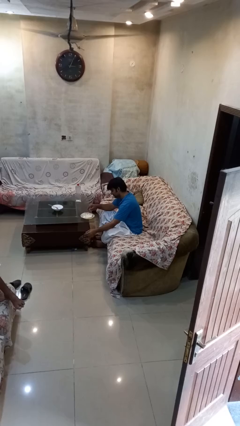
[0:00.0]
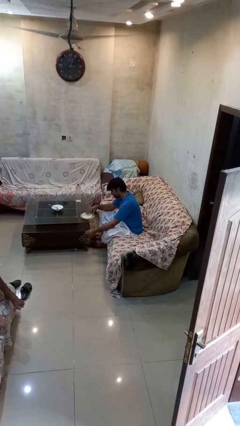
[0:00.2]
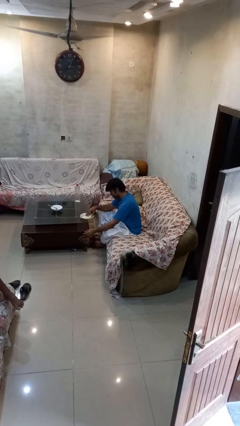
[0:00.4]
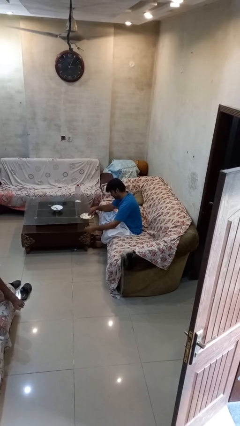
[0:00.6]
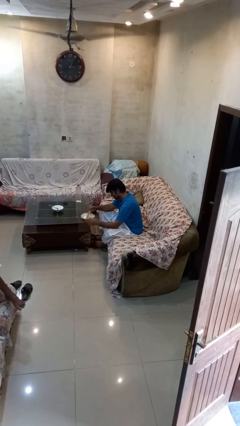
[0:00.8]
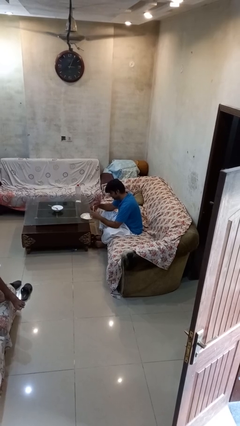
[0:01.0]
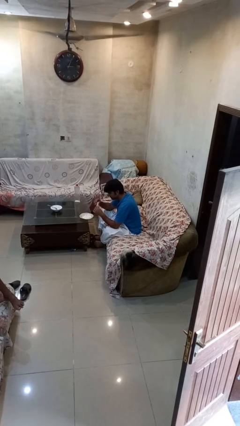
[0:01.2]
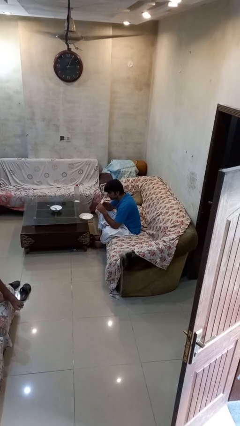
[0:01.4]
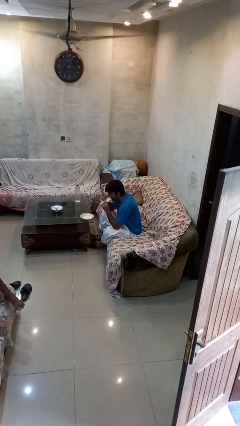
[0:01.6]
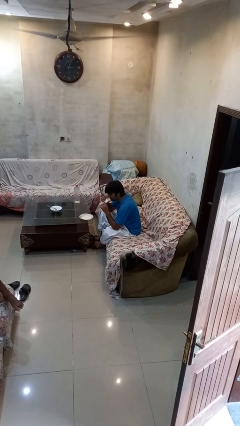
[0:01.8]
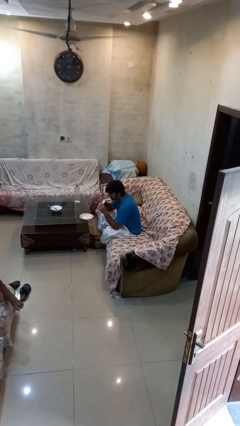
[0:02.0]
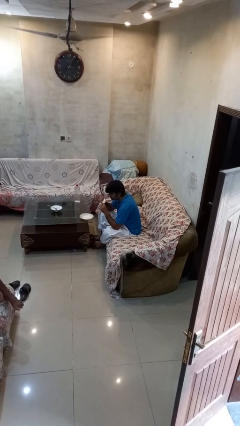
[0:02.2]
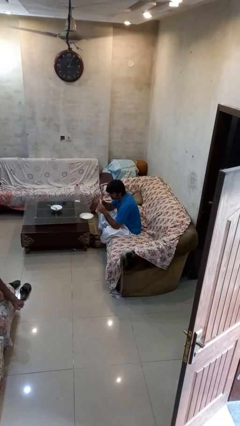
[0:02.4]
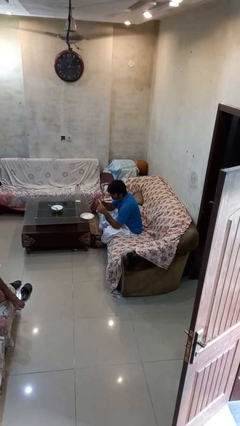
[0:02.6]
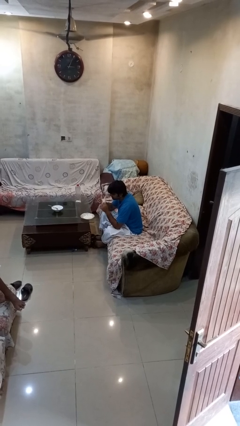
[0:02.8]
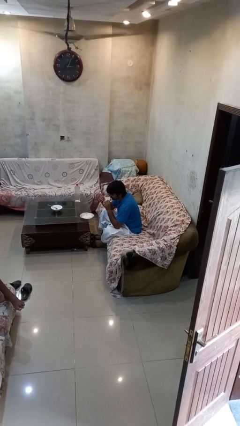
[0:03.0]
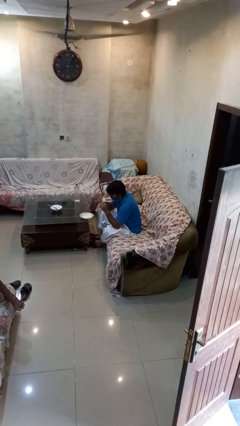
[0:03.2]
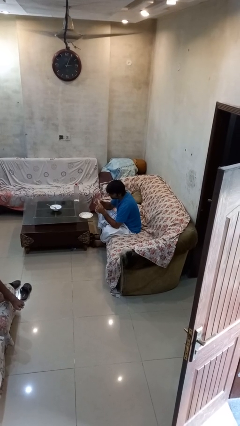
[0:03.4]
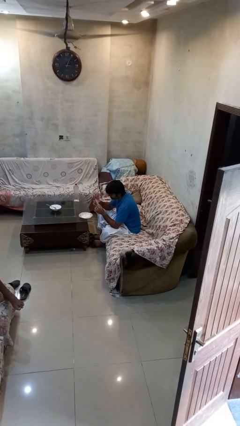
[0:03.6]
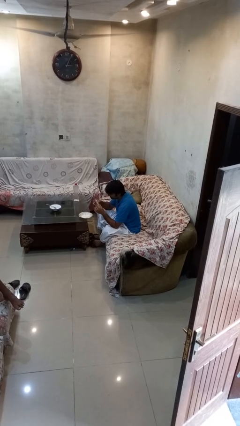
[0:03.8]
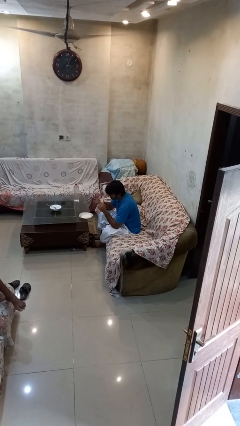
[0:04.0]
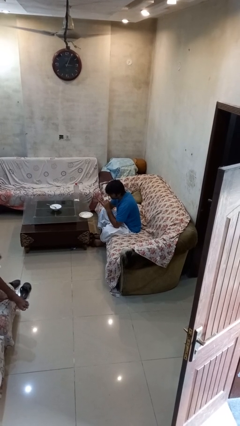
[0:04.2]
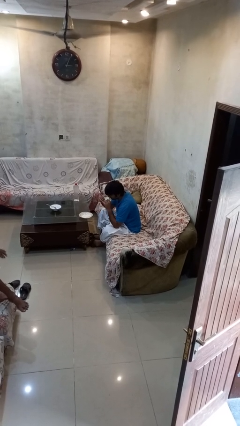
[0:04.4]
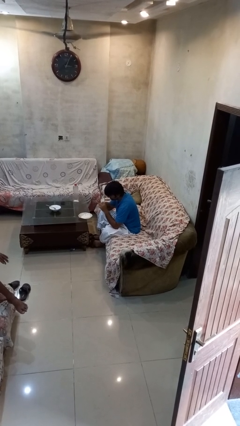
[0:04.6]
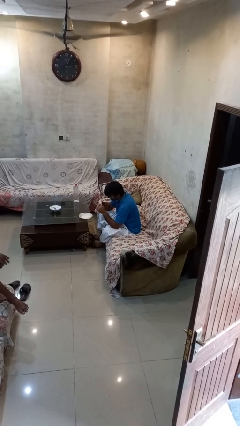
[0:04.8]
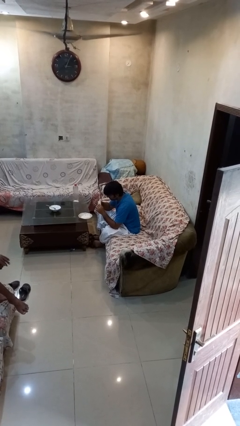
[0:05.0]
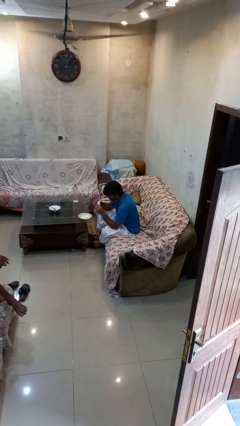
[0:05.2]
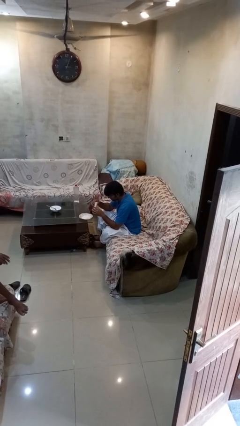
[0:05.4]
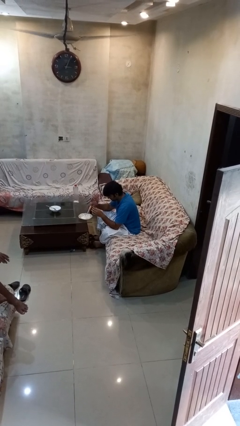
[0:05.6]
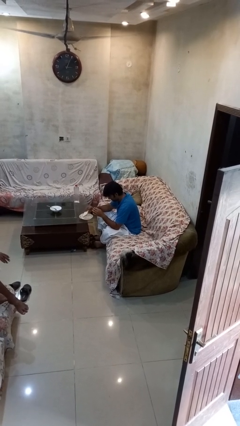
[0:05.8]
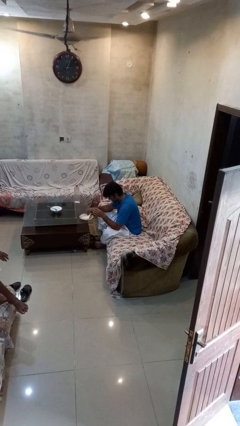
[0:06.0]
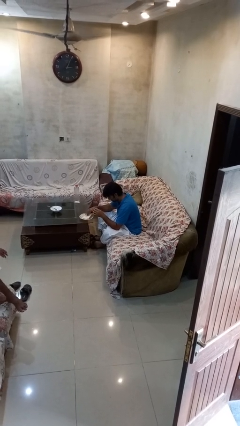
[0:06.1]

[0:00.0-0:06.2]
person eats with hands

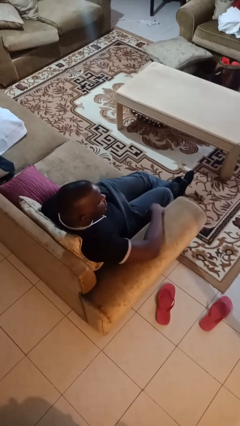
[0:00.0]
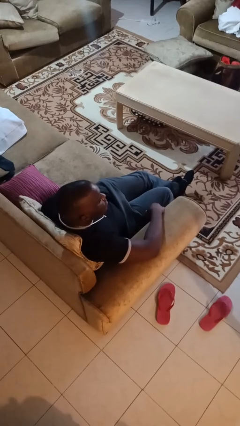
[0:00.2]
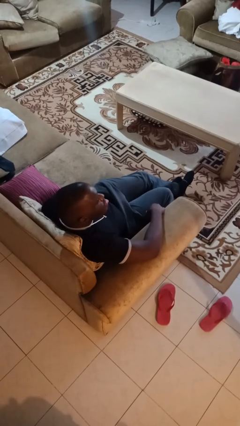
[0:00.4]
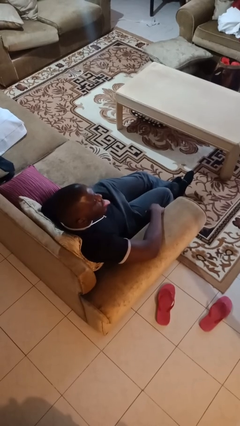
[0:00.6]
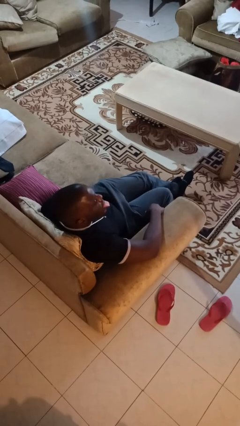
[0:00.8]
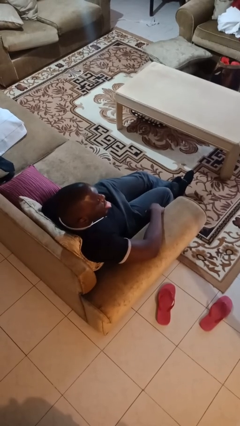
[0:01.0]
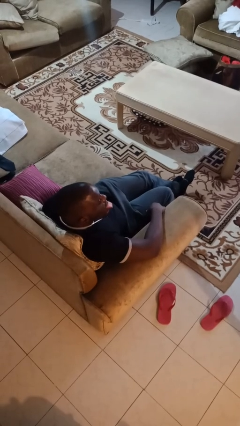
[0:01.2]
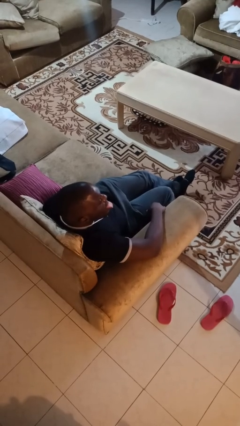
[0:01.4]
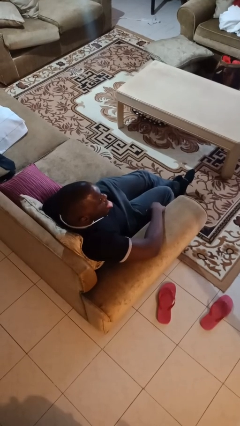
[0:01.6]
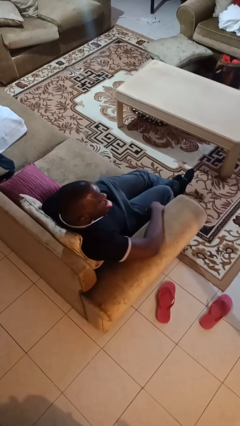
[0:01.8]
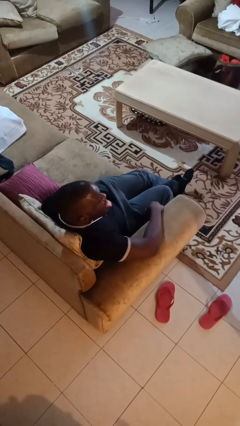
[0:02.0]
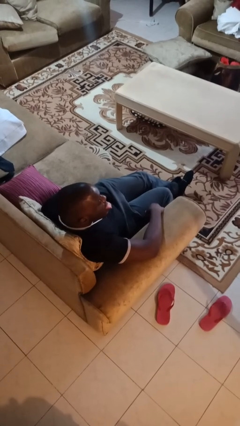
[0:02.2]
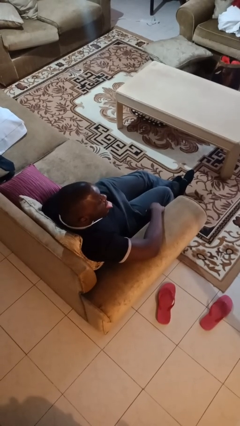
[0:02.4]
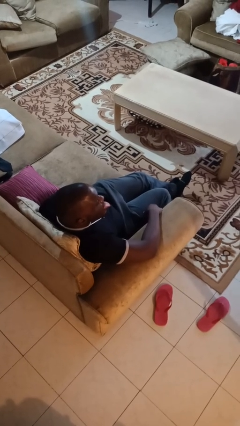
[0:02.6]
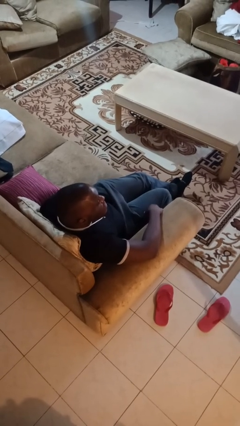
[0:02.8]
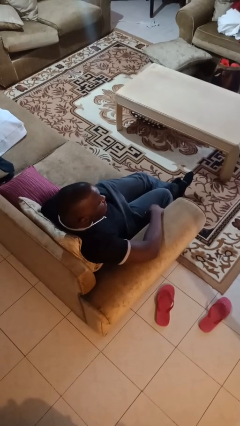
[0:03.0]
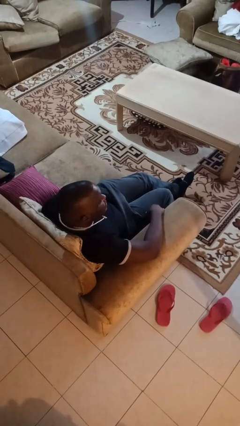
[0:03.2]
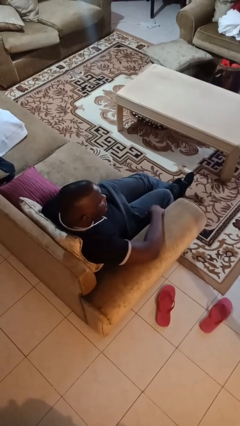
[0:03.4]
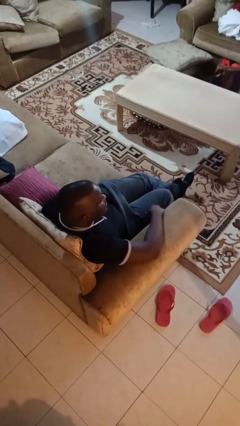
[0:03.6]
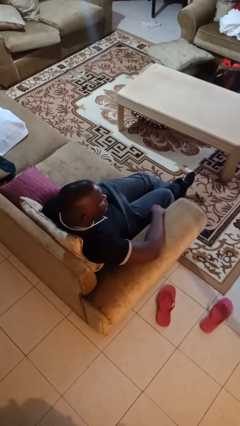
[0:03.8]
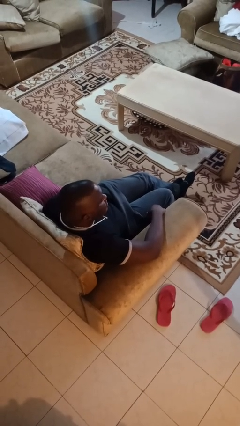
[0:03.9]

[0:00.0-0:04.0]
person sticks out tongue

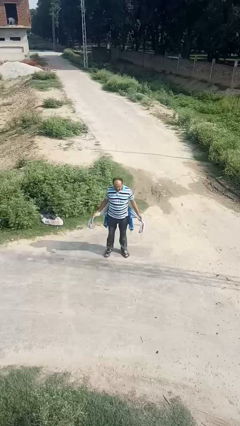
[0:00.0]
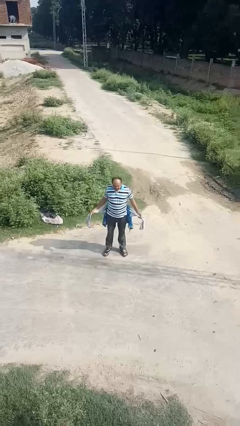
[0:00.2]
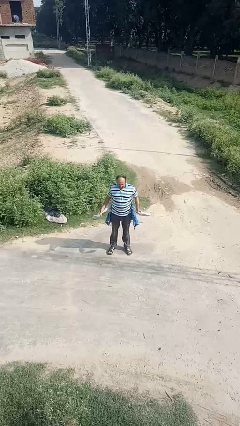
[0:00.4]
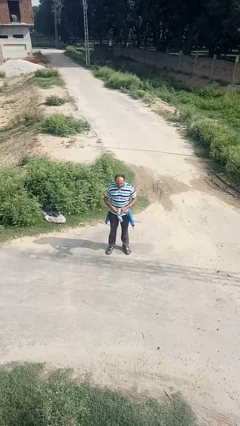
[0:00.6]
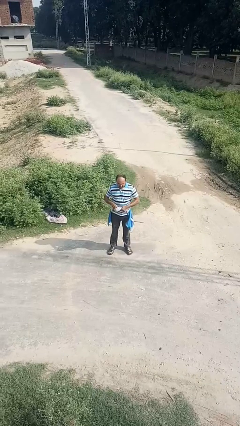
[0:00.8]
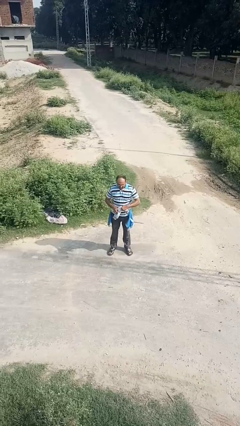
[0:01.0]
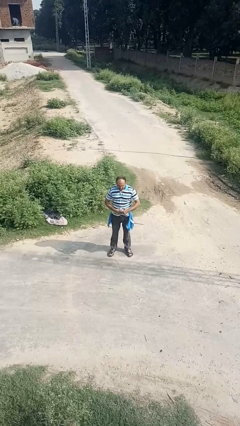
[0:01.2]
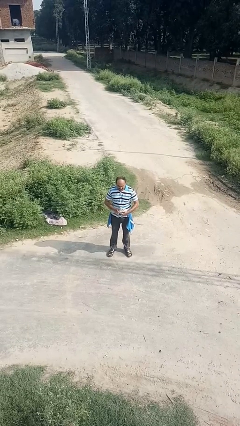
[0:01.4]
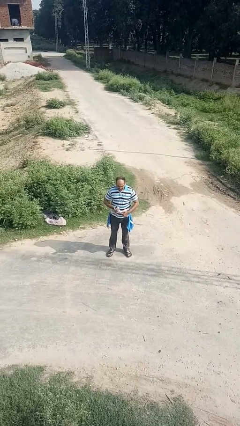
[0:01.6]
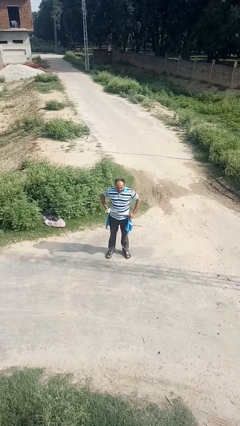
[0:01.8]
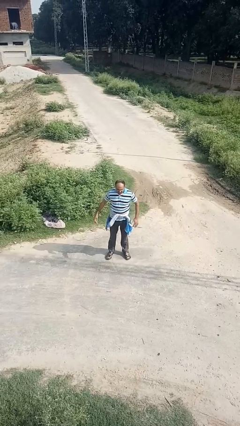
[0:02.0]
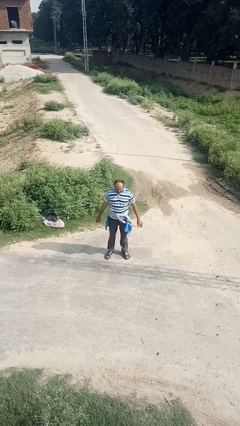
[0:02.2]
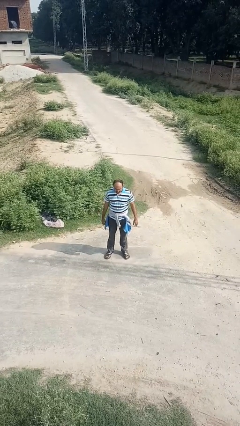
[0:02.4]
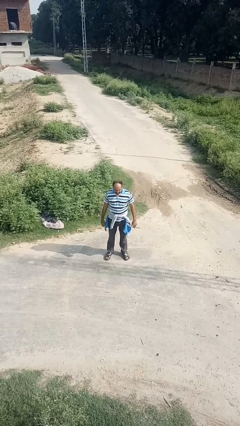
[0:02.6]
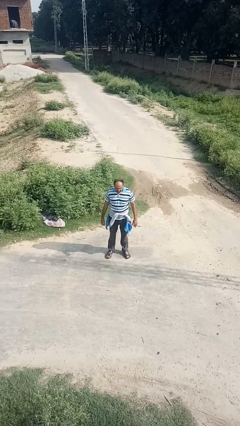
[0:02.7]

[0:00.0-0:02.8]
person ties jacket around waist

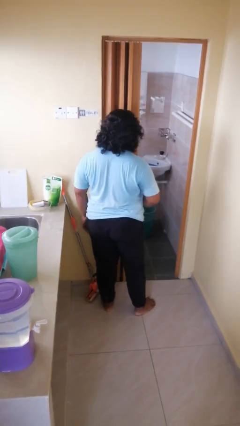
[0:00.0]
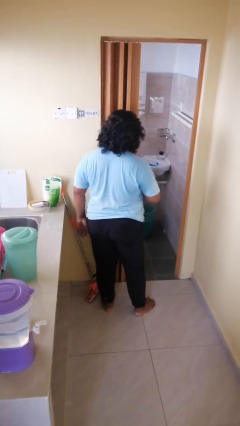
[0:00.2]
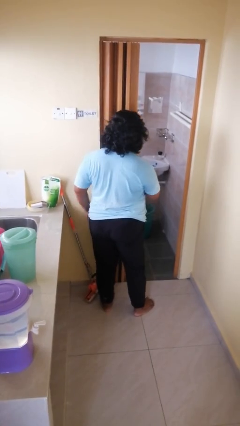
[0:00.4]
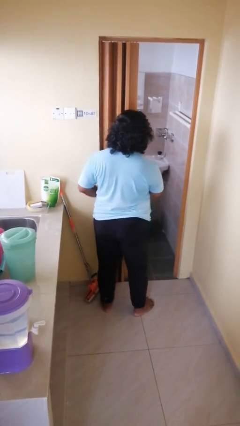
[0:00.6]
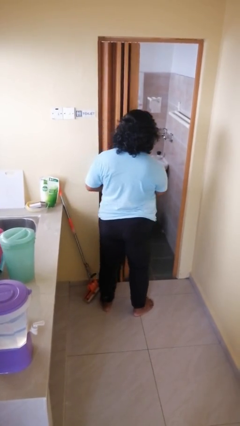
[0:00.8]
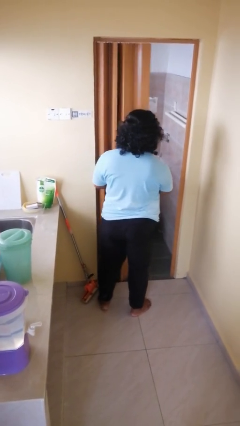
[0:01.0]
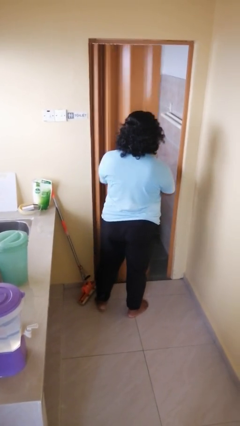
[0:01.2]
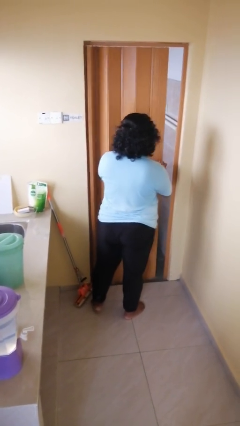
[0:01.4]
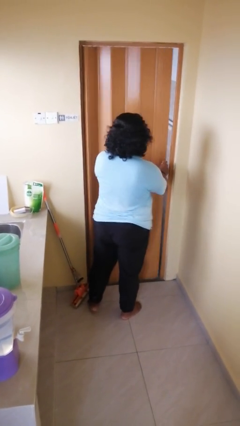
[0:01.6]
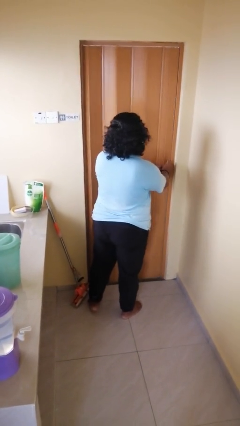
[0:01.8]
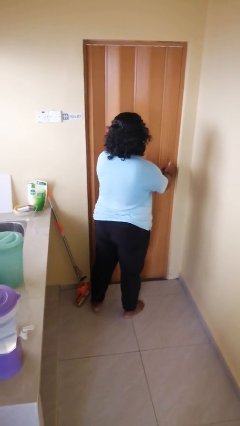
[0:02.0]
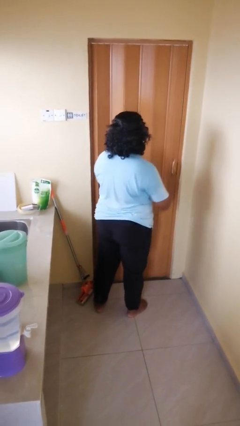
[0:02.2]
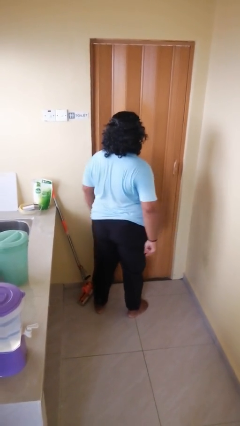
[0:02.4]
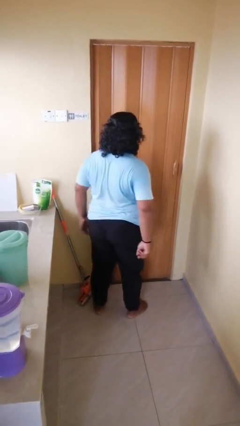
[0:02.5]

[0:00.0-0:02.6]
person closes sliding door

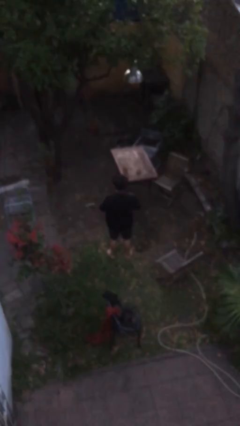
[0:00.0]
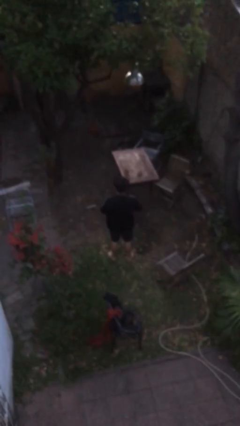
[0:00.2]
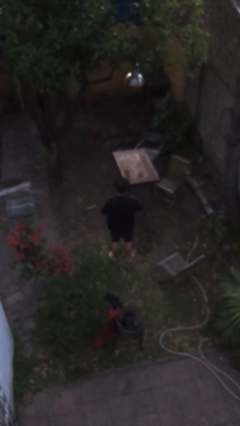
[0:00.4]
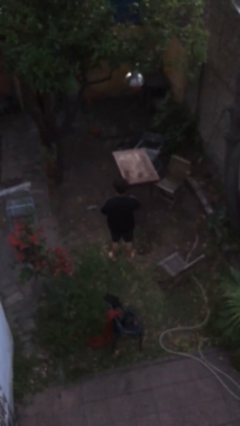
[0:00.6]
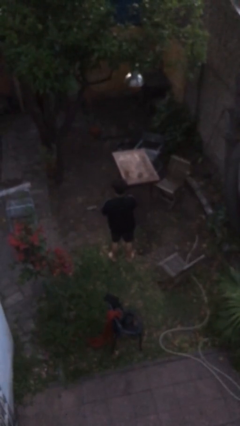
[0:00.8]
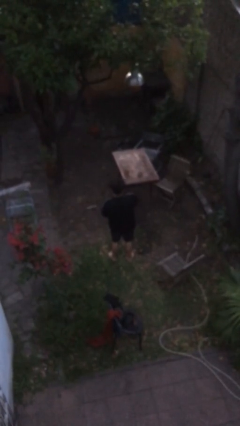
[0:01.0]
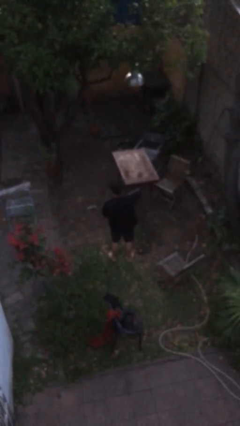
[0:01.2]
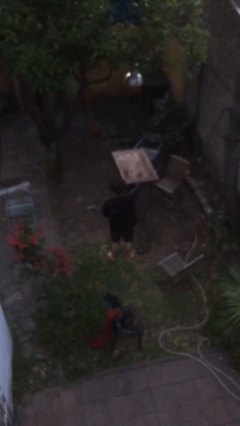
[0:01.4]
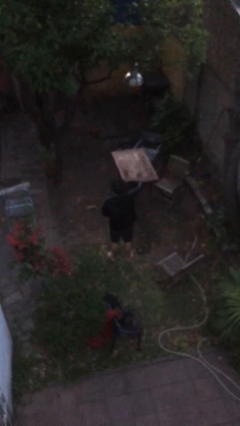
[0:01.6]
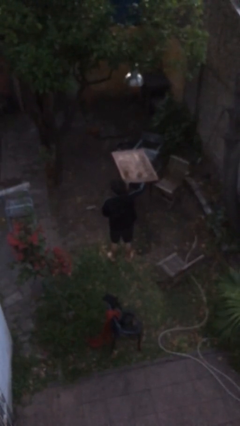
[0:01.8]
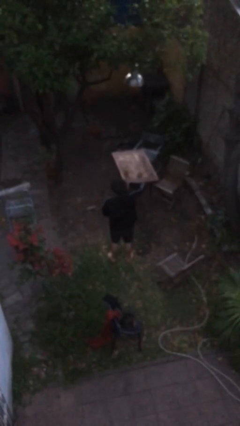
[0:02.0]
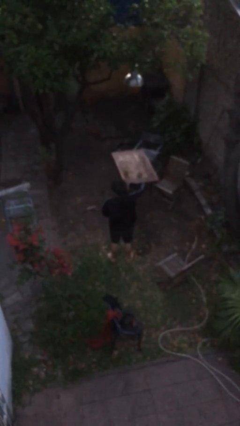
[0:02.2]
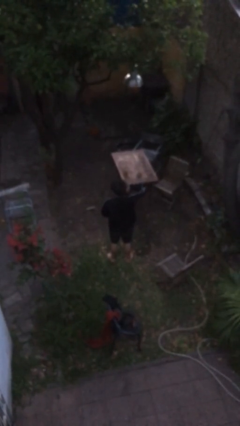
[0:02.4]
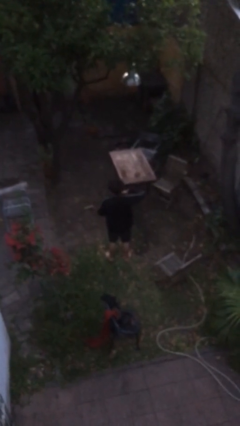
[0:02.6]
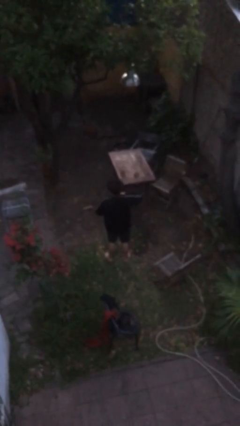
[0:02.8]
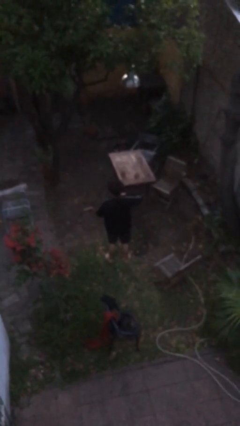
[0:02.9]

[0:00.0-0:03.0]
person zips up jacket
